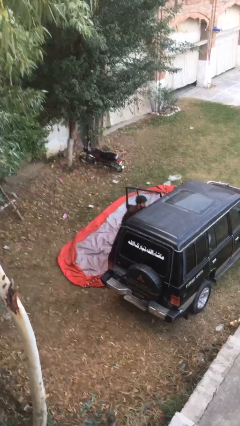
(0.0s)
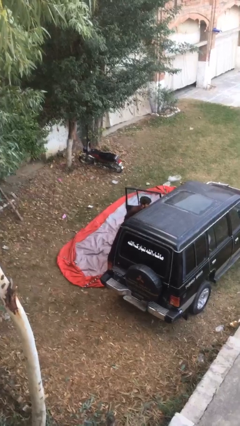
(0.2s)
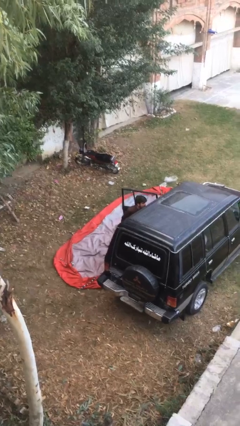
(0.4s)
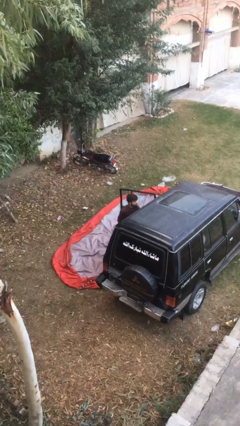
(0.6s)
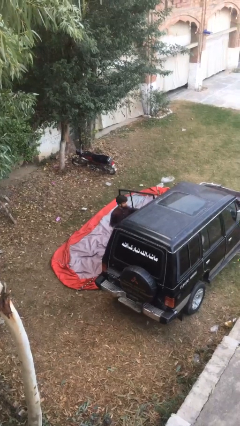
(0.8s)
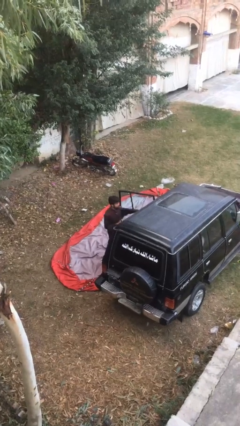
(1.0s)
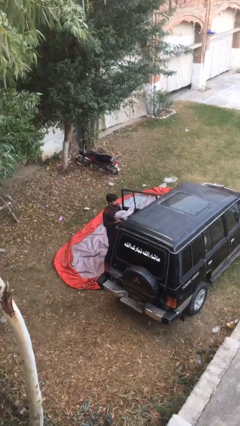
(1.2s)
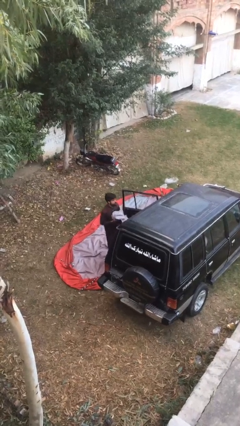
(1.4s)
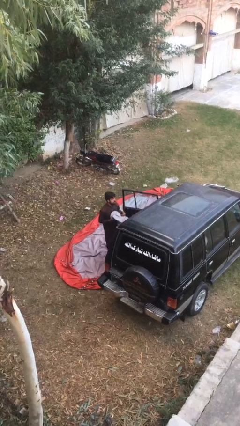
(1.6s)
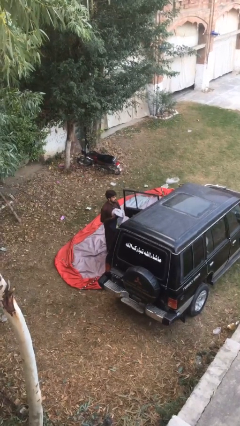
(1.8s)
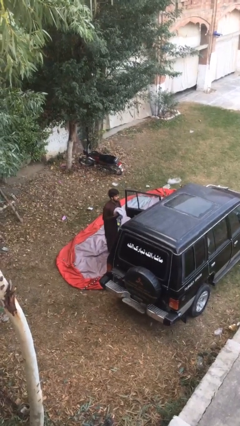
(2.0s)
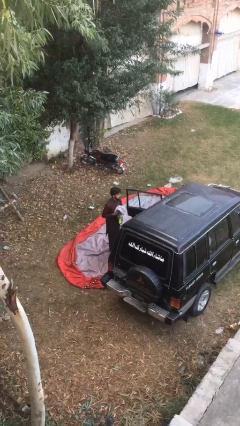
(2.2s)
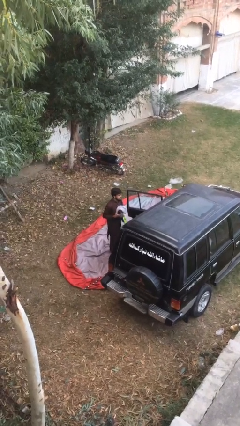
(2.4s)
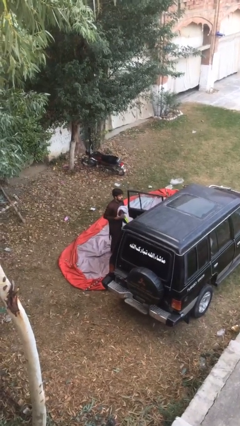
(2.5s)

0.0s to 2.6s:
person unloads car

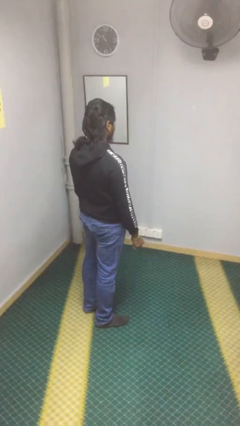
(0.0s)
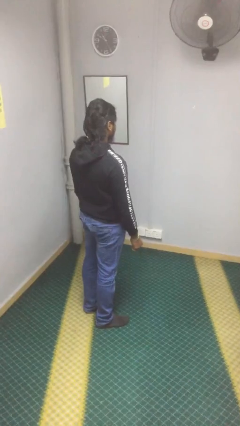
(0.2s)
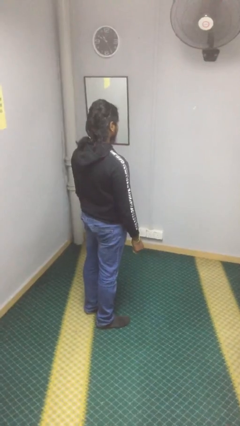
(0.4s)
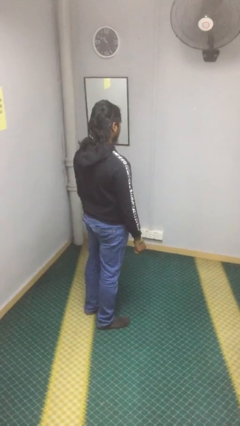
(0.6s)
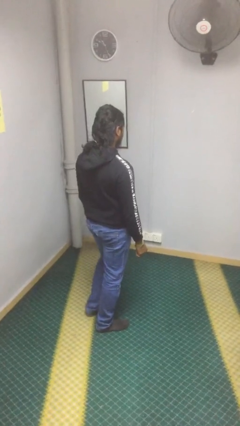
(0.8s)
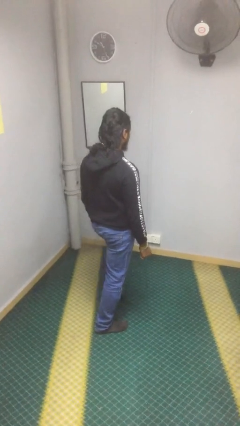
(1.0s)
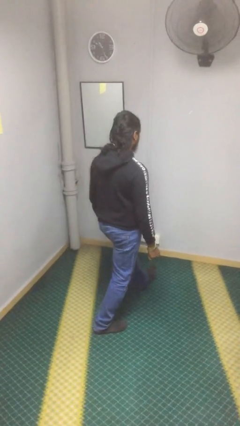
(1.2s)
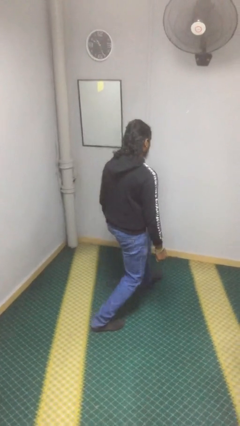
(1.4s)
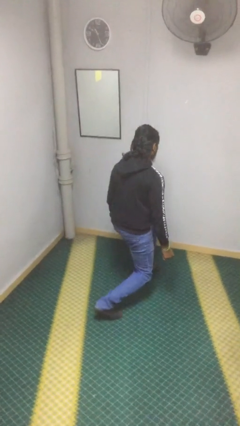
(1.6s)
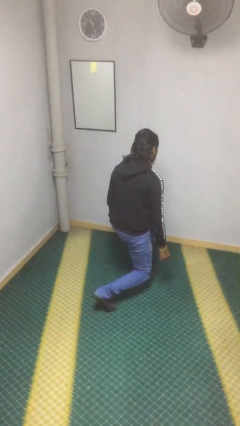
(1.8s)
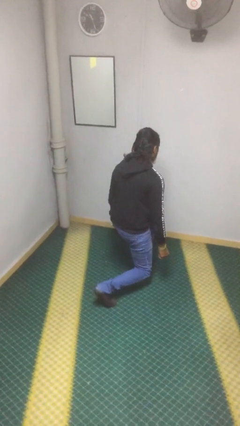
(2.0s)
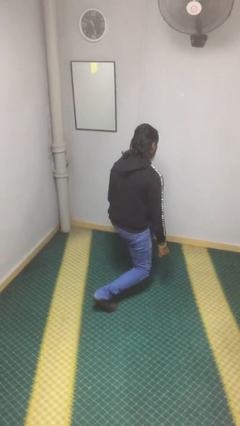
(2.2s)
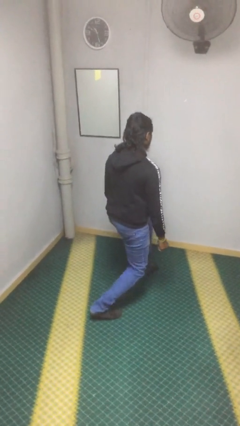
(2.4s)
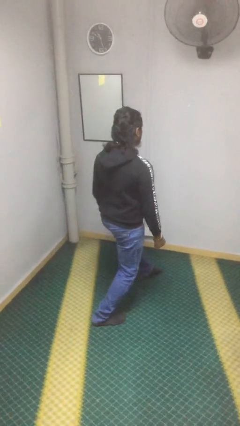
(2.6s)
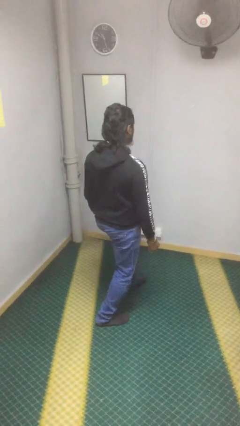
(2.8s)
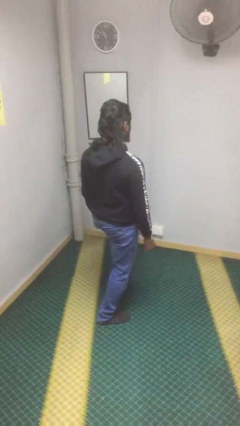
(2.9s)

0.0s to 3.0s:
person exercises with lunges

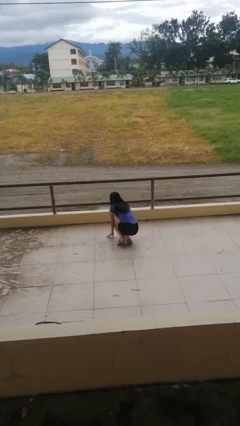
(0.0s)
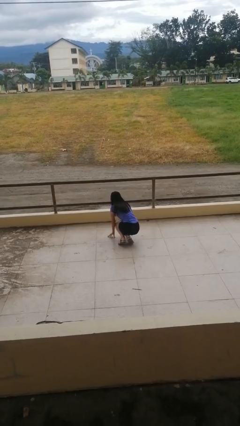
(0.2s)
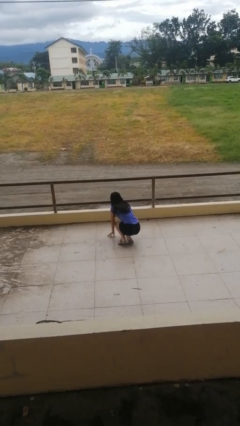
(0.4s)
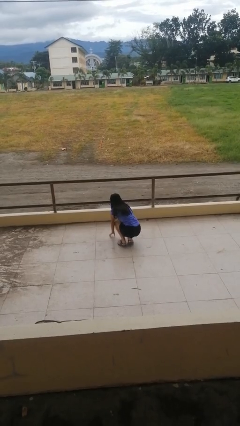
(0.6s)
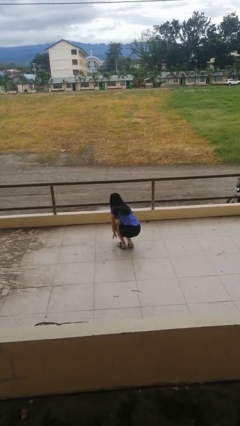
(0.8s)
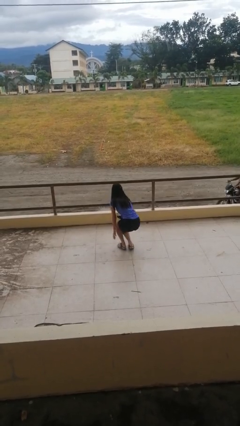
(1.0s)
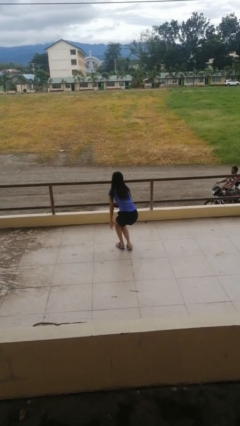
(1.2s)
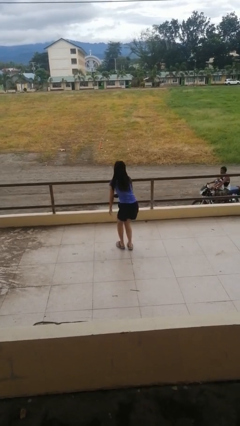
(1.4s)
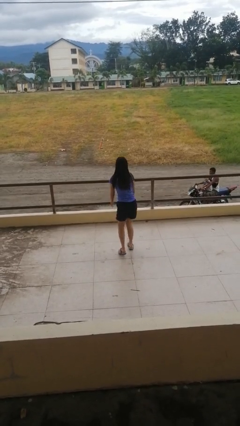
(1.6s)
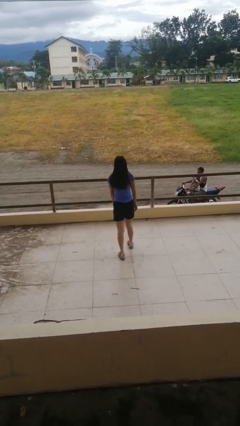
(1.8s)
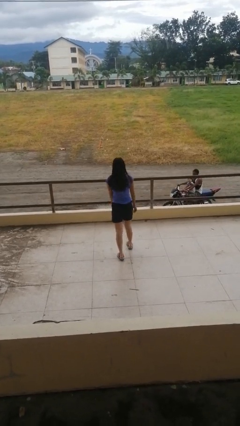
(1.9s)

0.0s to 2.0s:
person stands up from floor

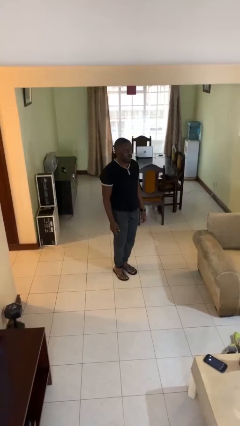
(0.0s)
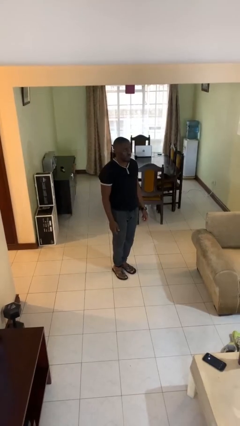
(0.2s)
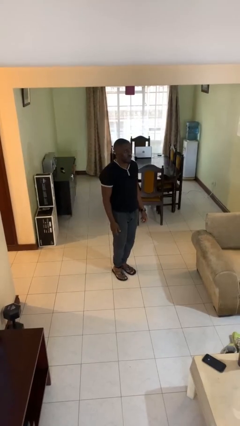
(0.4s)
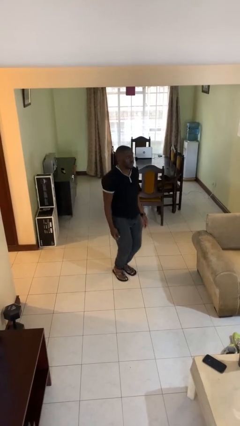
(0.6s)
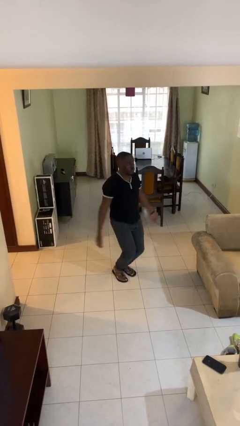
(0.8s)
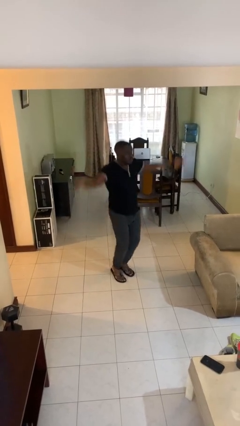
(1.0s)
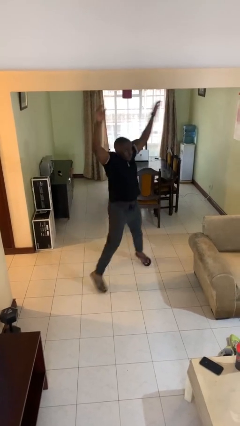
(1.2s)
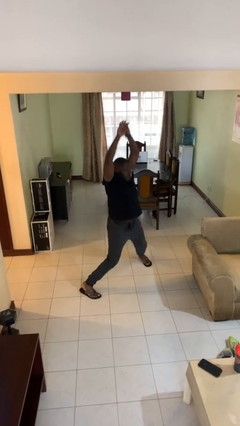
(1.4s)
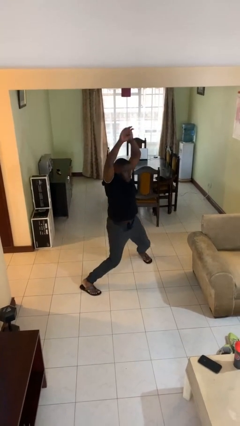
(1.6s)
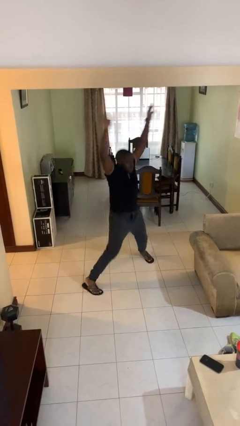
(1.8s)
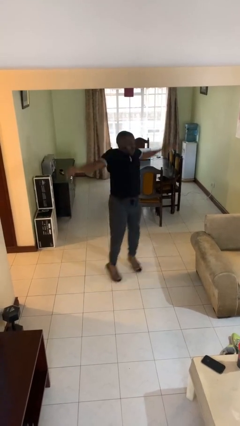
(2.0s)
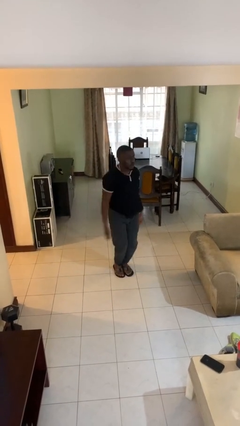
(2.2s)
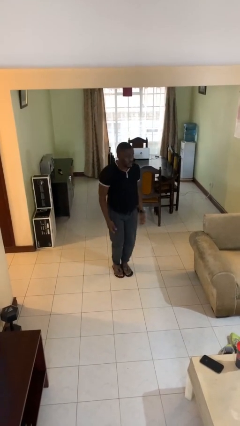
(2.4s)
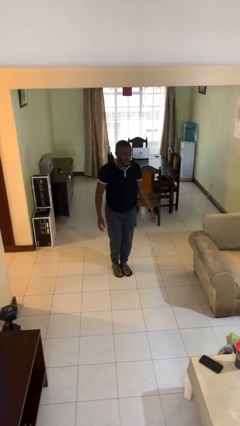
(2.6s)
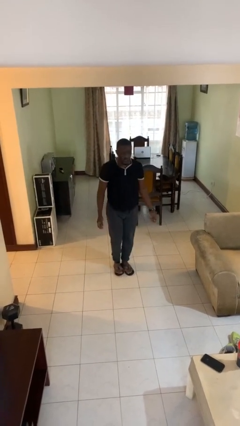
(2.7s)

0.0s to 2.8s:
person exercises with jumping jacks

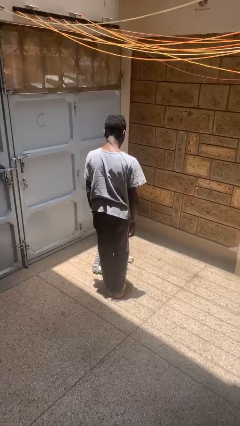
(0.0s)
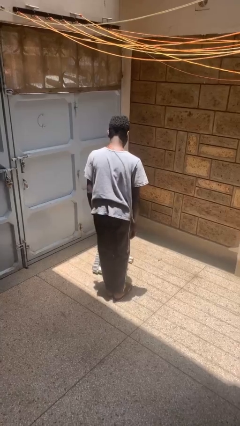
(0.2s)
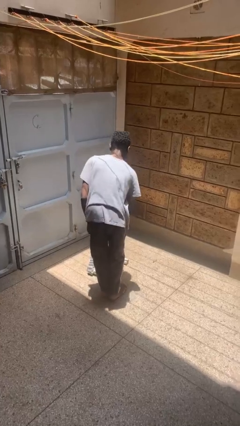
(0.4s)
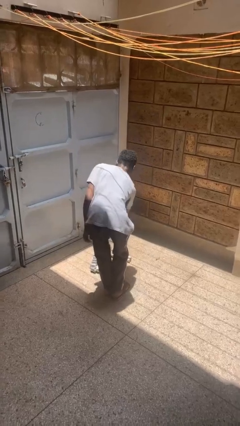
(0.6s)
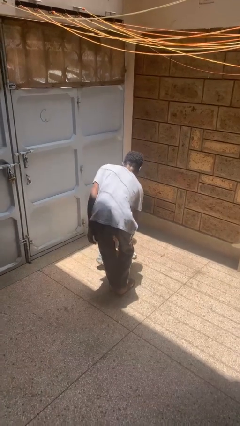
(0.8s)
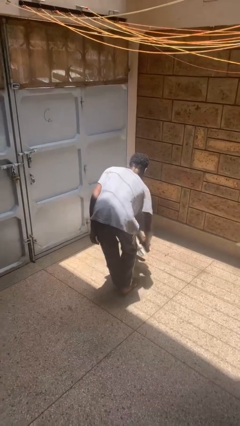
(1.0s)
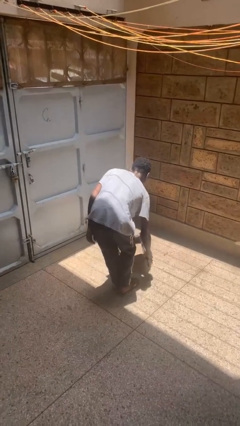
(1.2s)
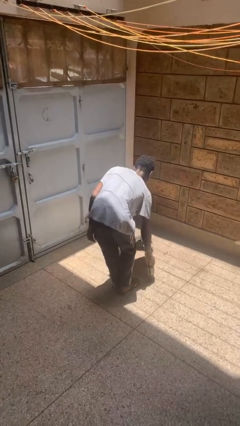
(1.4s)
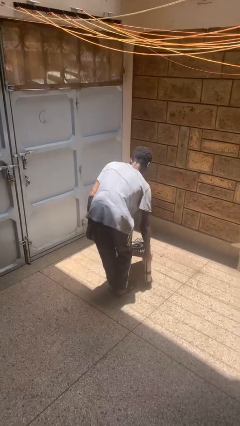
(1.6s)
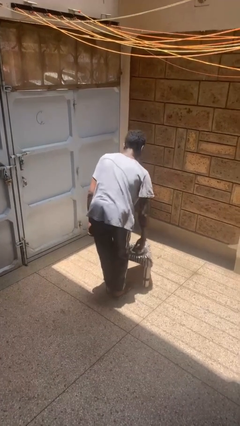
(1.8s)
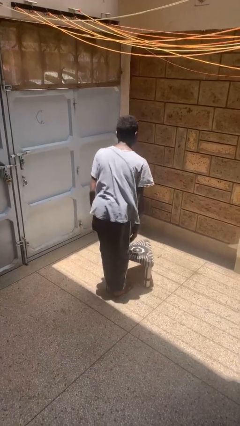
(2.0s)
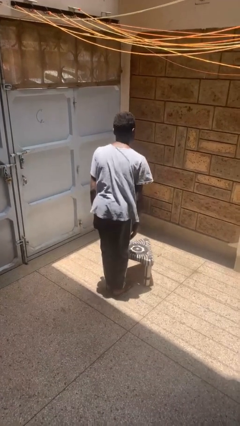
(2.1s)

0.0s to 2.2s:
person sets upright furniture

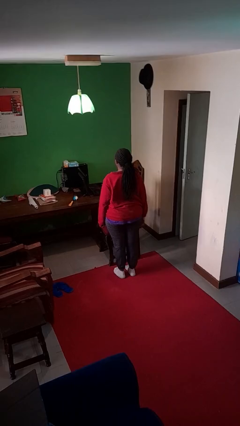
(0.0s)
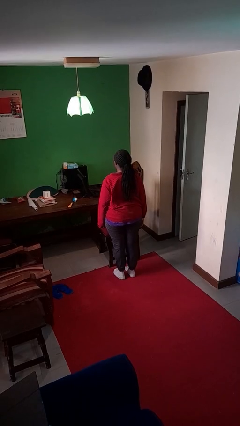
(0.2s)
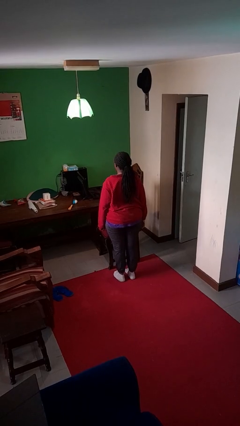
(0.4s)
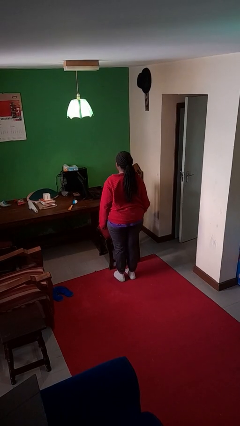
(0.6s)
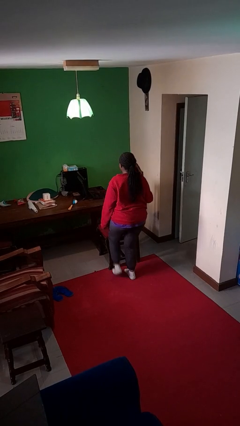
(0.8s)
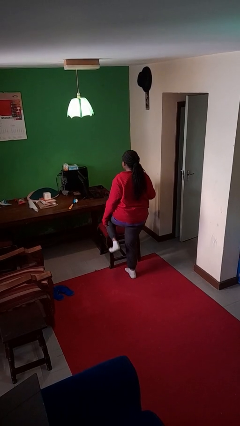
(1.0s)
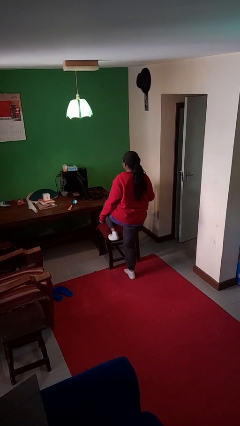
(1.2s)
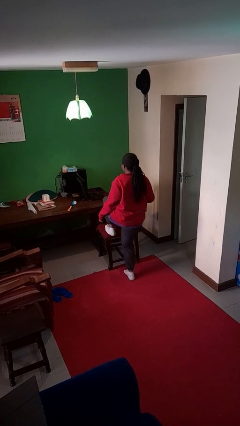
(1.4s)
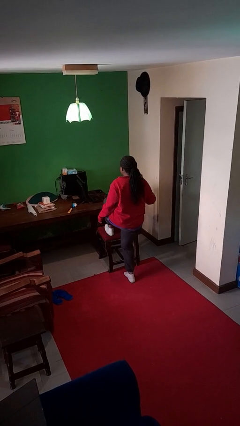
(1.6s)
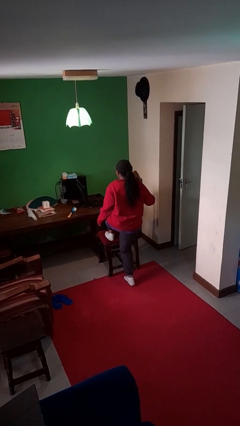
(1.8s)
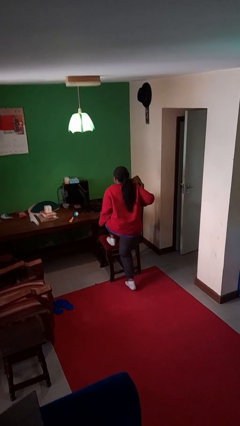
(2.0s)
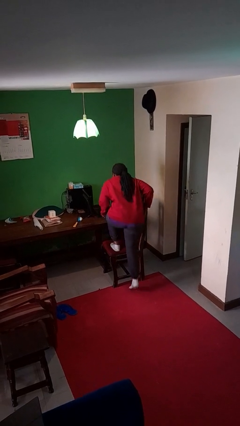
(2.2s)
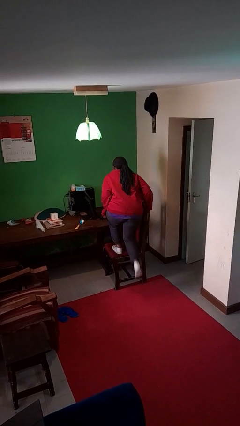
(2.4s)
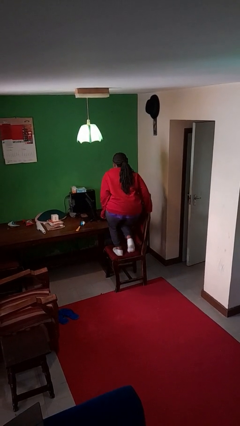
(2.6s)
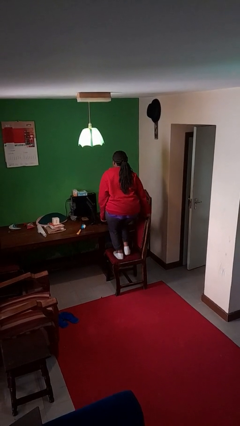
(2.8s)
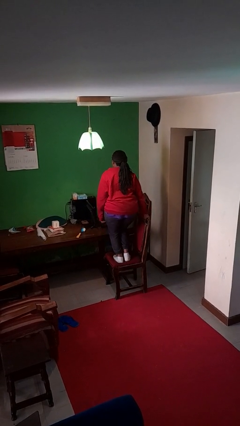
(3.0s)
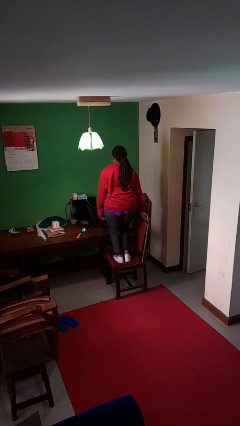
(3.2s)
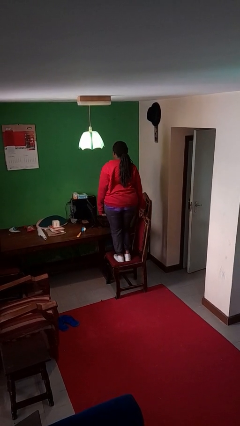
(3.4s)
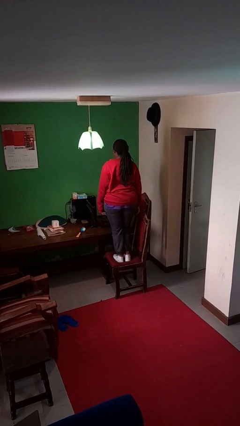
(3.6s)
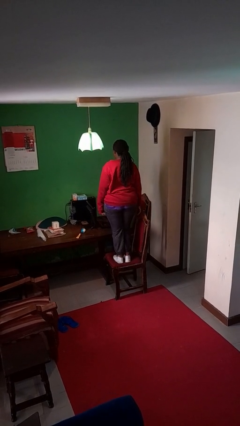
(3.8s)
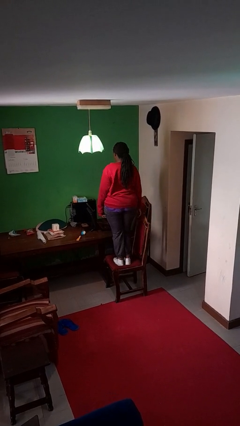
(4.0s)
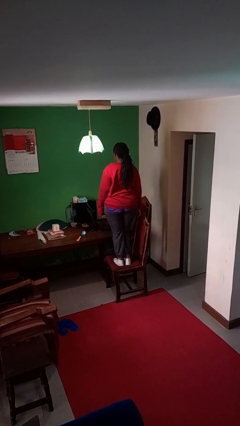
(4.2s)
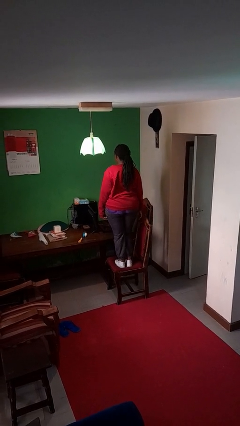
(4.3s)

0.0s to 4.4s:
person climbs on chair

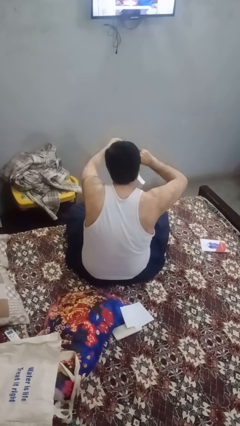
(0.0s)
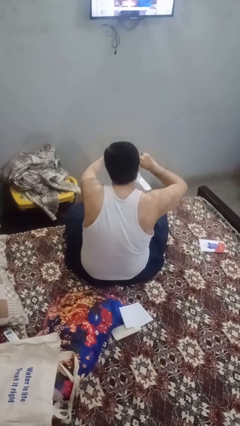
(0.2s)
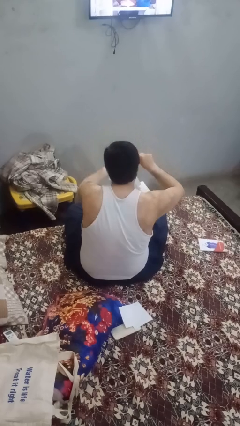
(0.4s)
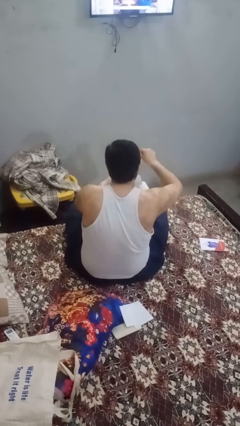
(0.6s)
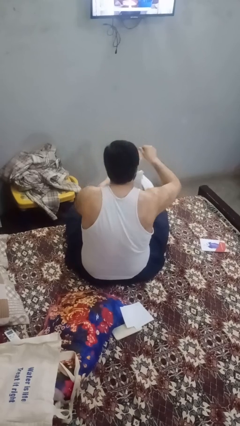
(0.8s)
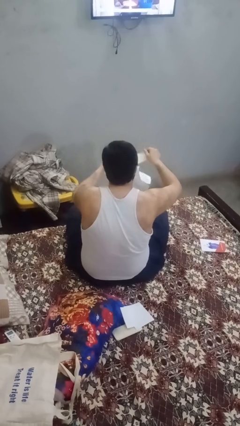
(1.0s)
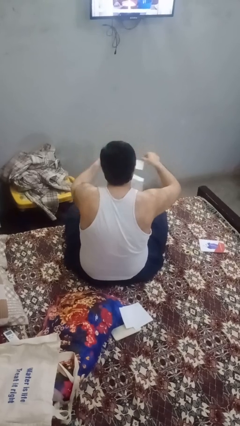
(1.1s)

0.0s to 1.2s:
person tears paper
